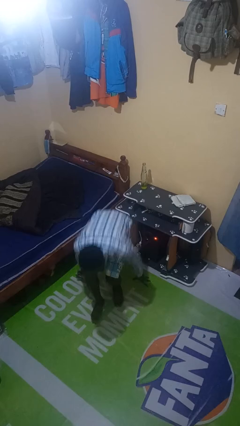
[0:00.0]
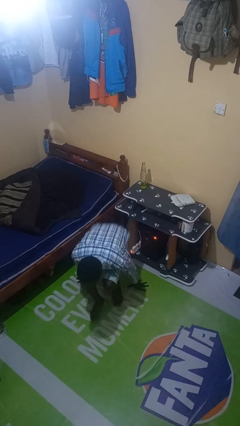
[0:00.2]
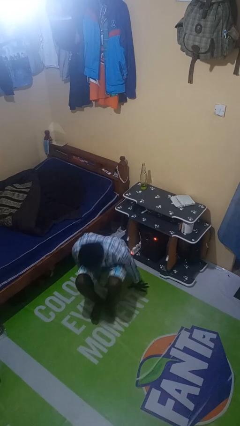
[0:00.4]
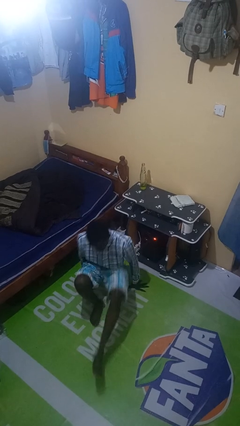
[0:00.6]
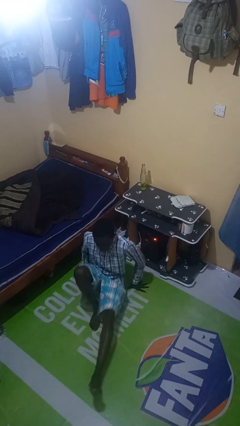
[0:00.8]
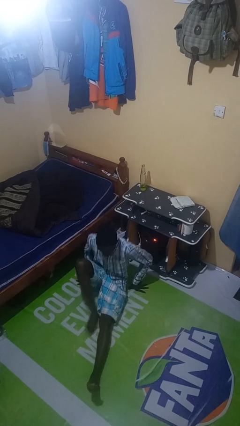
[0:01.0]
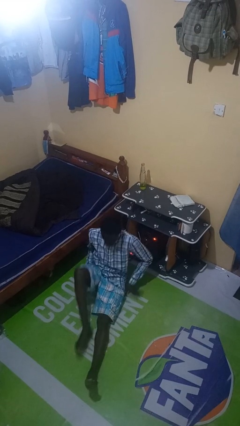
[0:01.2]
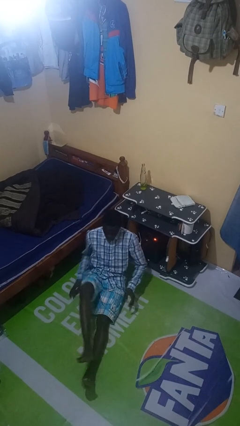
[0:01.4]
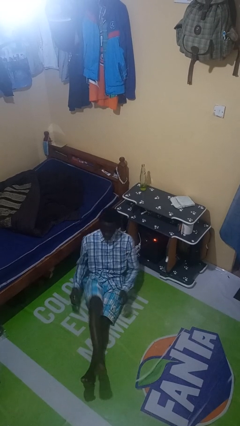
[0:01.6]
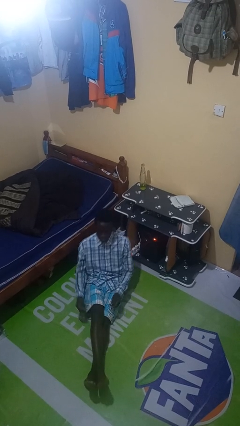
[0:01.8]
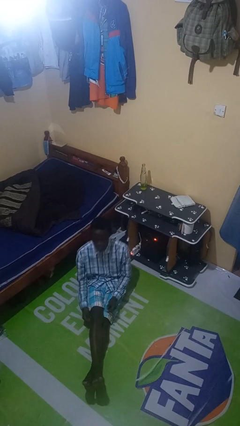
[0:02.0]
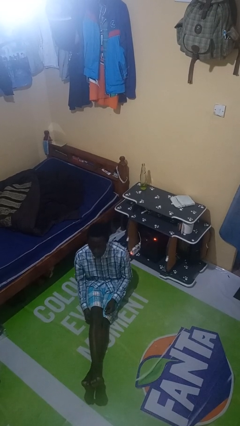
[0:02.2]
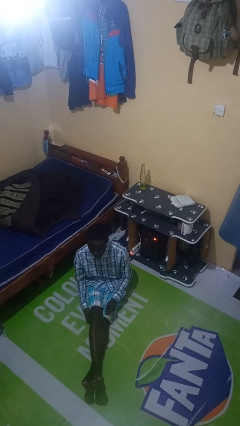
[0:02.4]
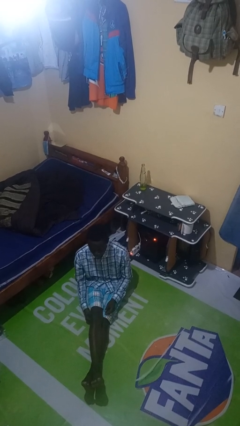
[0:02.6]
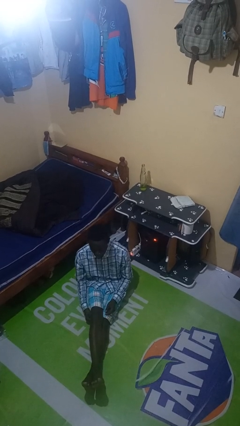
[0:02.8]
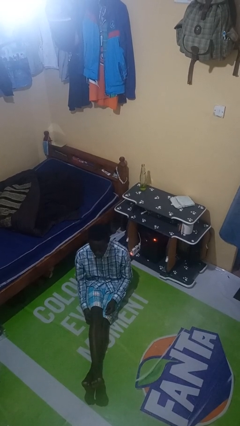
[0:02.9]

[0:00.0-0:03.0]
person sits crisscross

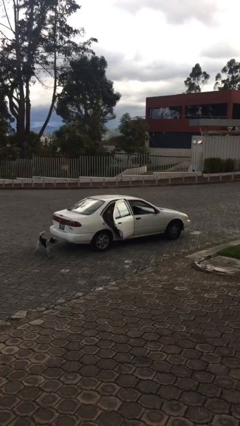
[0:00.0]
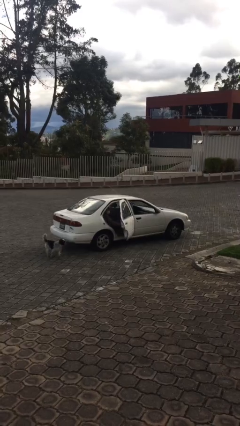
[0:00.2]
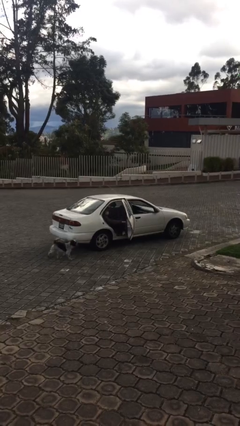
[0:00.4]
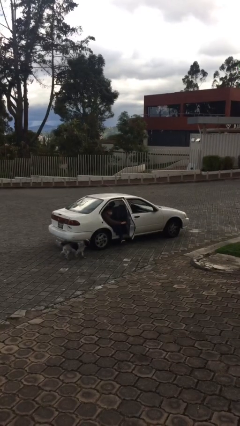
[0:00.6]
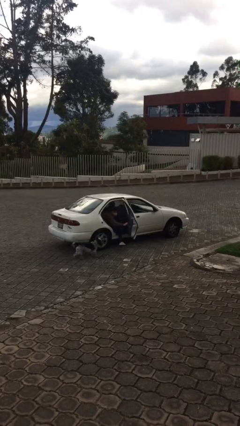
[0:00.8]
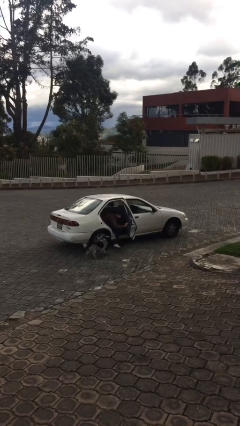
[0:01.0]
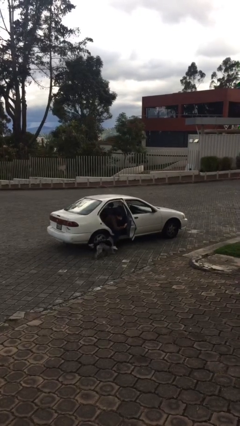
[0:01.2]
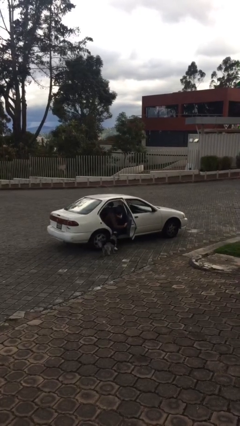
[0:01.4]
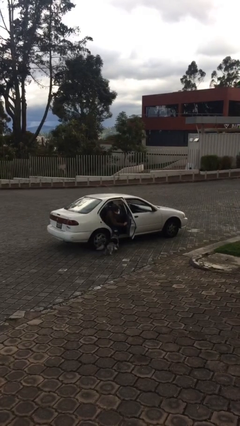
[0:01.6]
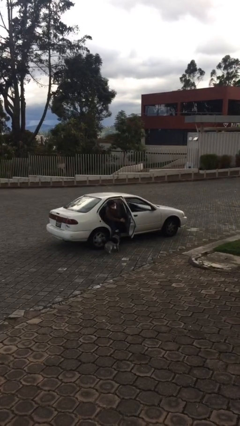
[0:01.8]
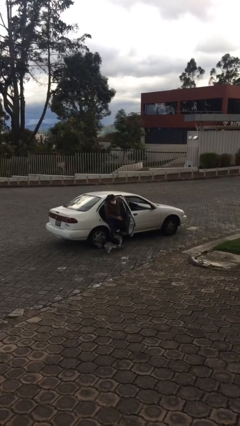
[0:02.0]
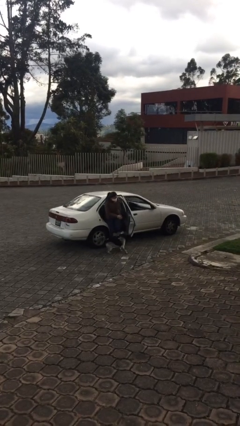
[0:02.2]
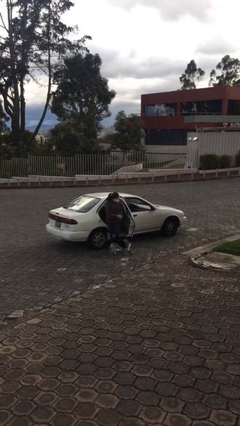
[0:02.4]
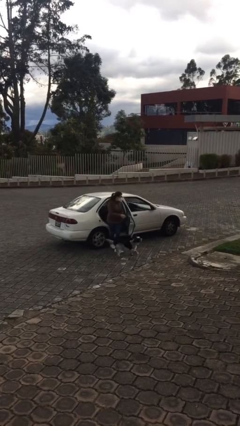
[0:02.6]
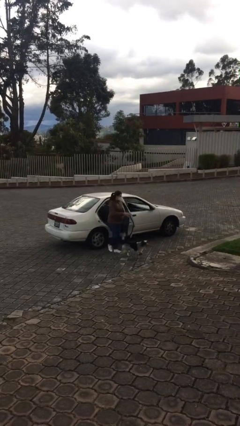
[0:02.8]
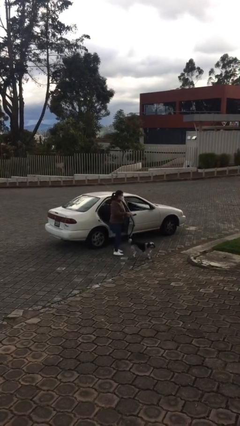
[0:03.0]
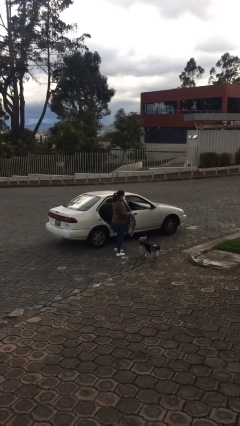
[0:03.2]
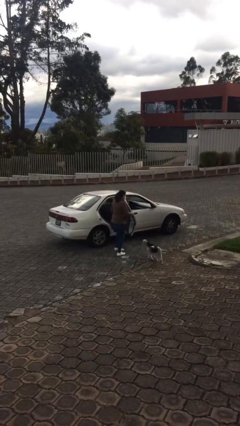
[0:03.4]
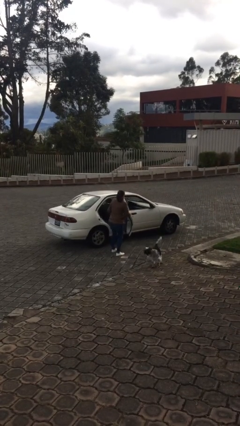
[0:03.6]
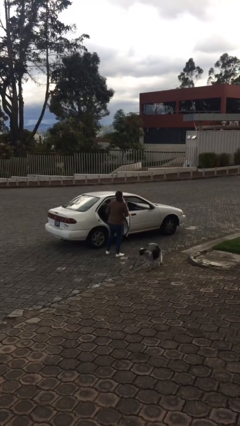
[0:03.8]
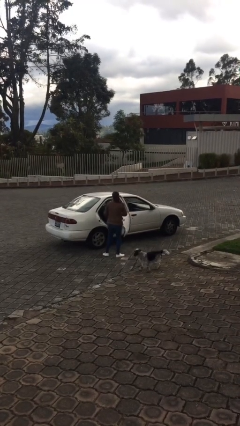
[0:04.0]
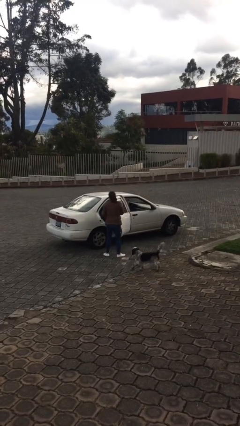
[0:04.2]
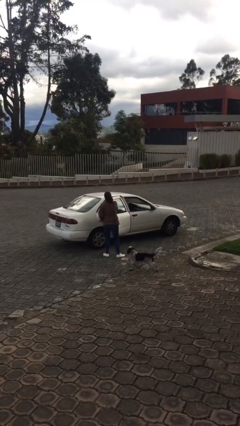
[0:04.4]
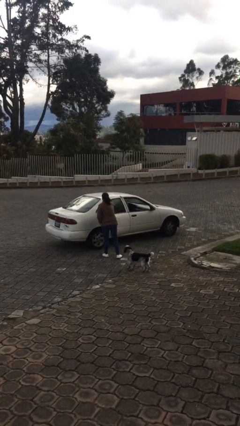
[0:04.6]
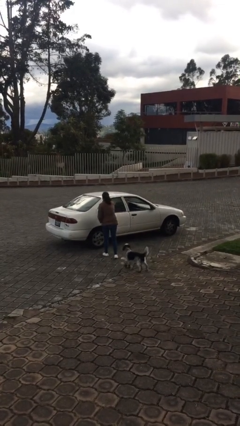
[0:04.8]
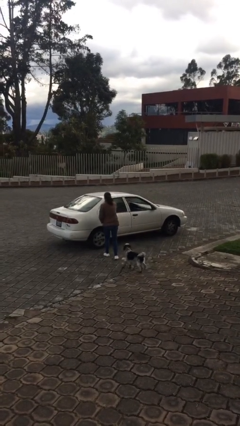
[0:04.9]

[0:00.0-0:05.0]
car drops off person

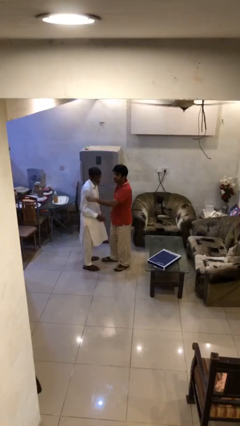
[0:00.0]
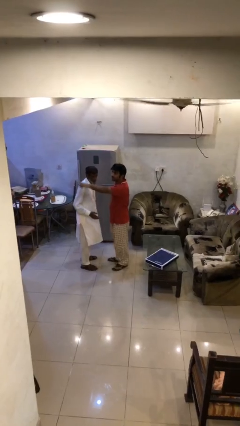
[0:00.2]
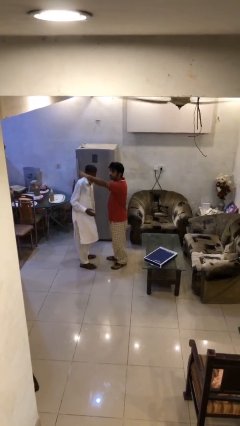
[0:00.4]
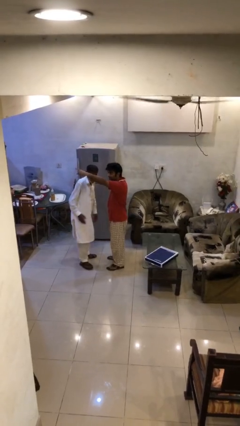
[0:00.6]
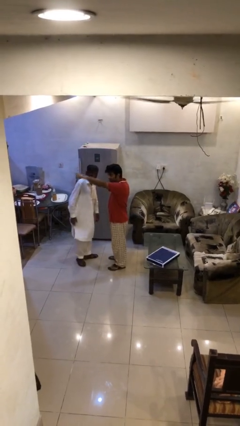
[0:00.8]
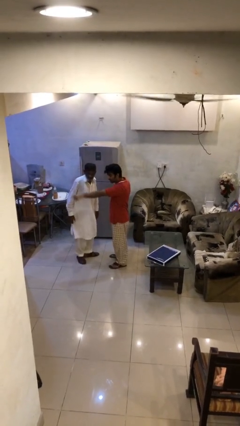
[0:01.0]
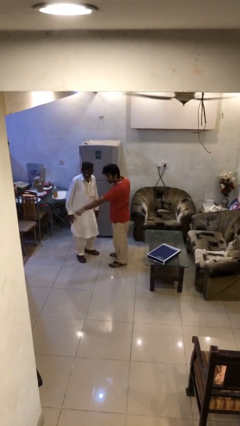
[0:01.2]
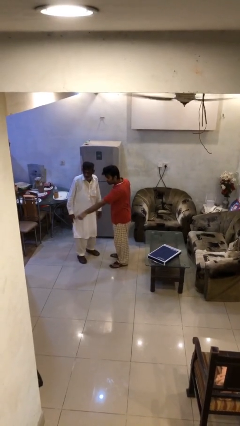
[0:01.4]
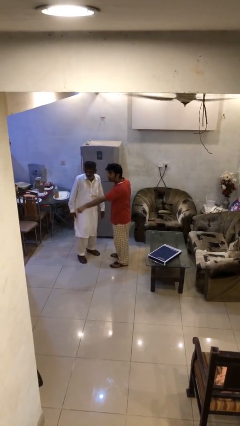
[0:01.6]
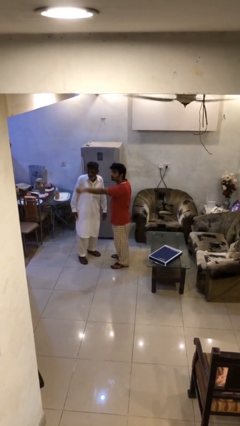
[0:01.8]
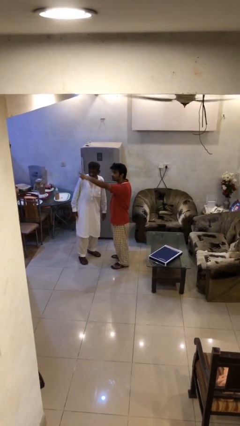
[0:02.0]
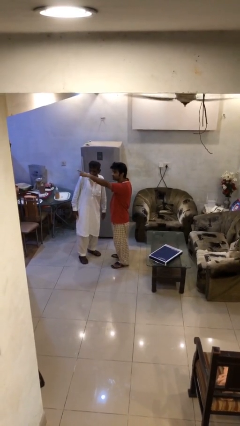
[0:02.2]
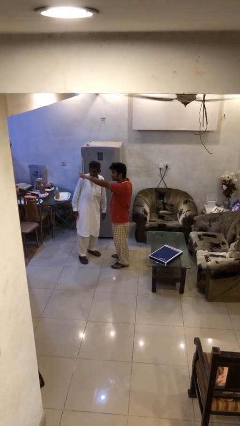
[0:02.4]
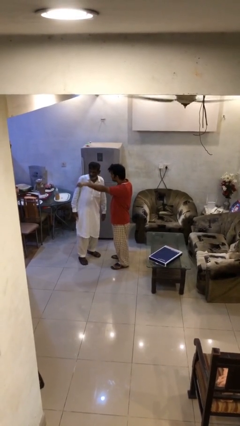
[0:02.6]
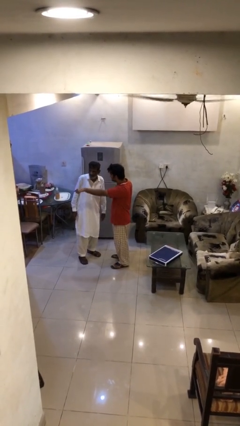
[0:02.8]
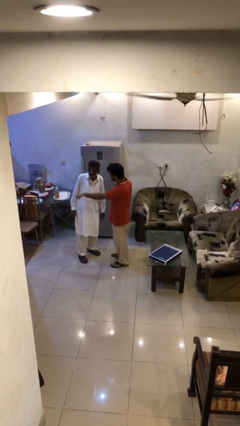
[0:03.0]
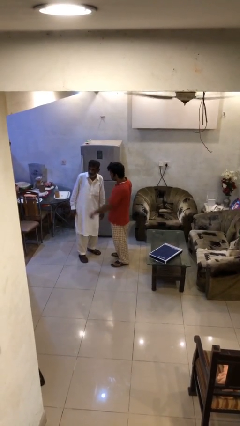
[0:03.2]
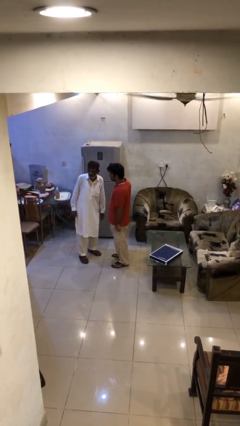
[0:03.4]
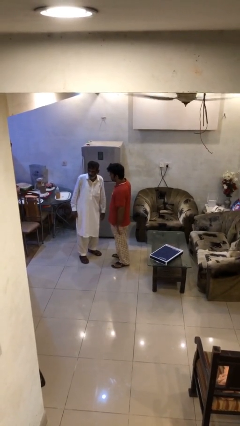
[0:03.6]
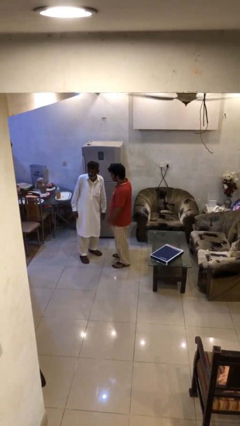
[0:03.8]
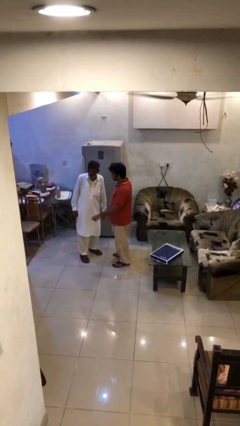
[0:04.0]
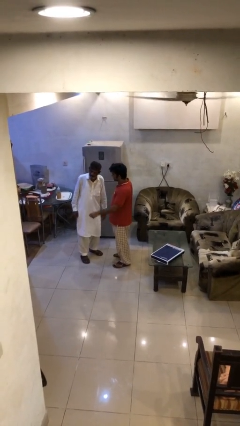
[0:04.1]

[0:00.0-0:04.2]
person talks to person

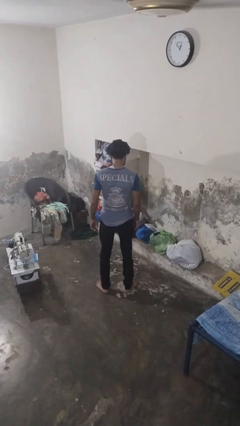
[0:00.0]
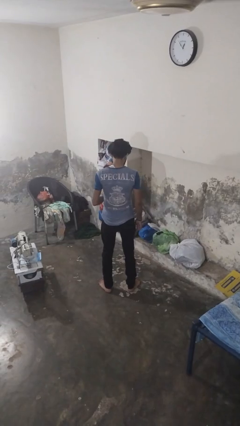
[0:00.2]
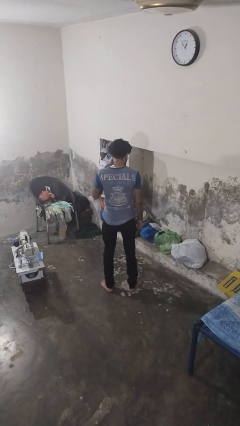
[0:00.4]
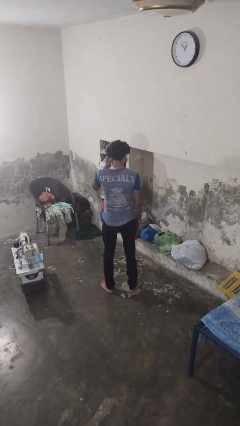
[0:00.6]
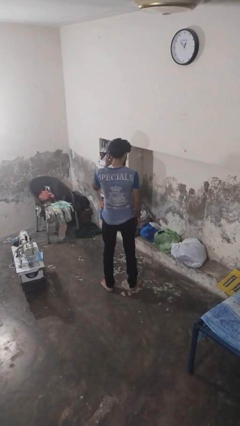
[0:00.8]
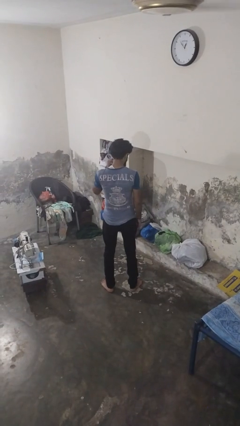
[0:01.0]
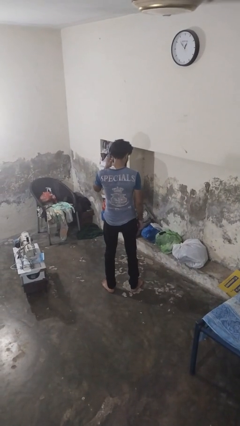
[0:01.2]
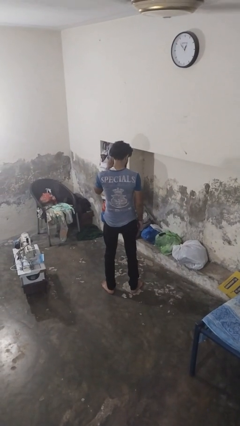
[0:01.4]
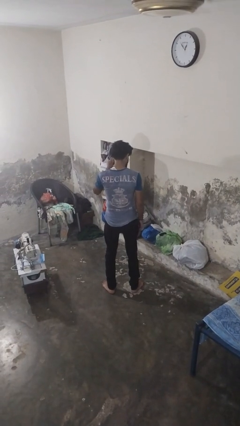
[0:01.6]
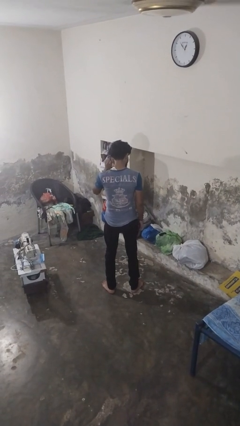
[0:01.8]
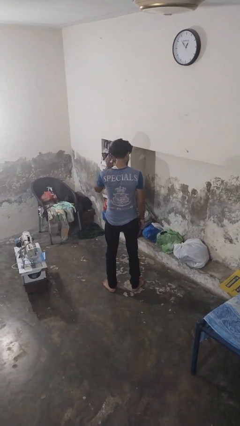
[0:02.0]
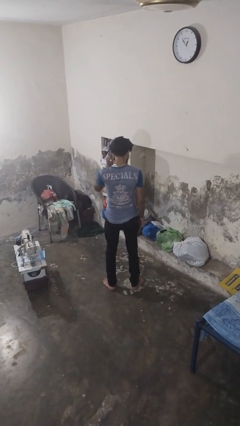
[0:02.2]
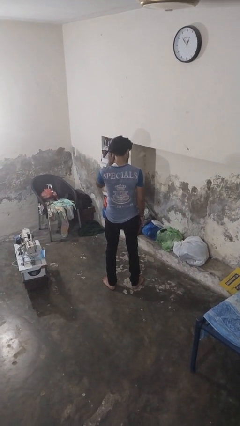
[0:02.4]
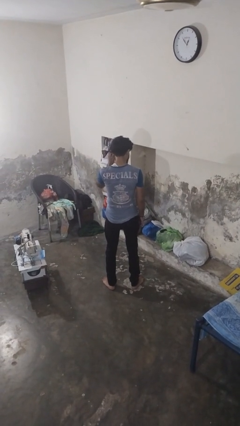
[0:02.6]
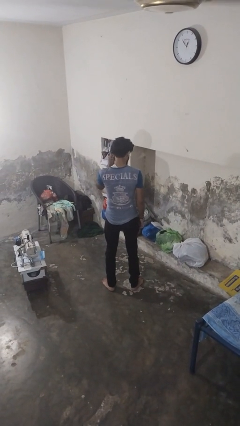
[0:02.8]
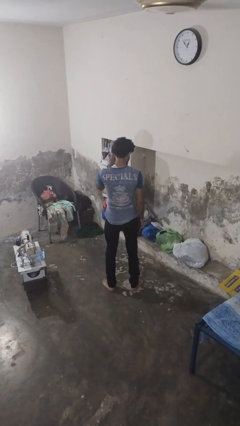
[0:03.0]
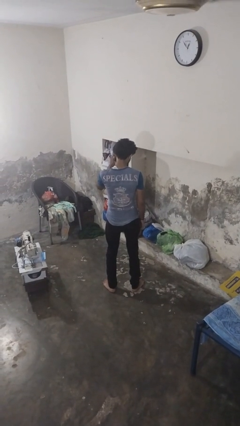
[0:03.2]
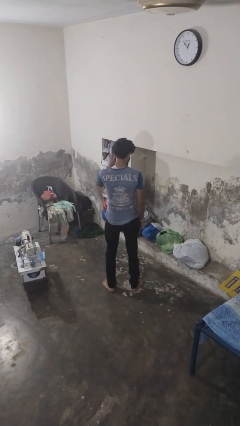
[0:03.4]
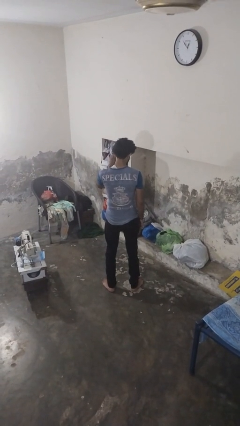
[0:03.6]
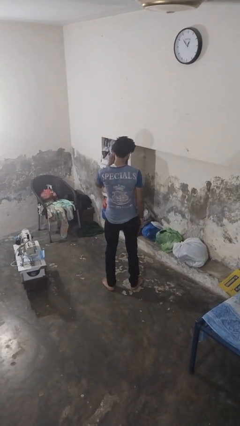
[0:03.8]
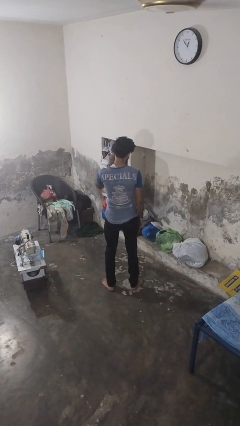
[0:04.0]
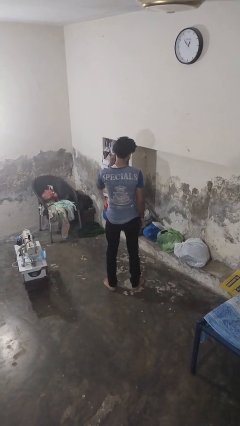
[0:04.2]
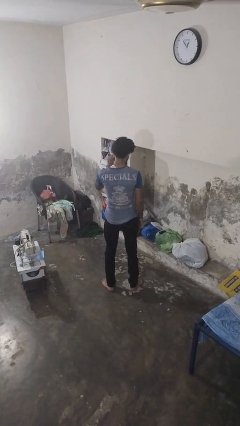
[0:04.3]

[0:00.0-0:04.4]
person touches earlobe

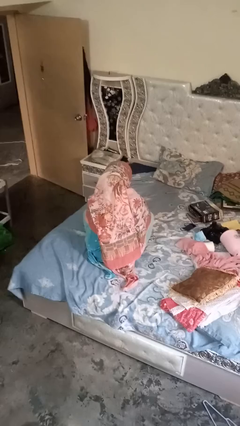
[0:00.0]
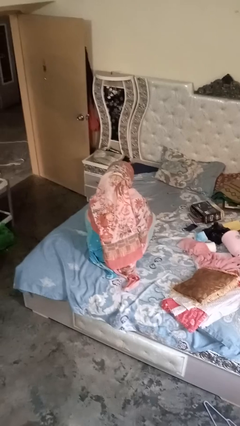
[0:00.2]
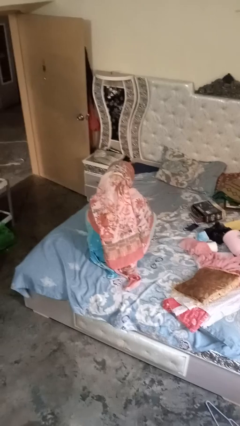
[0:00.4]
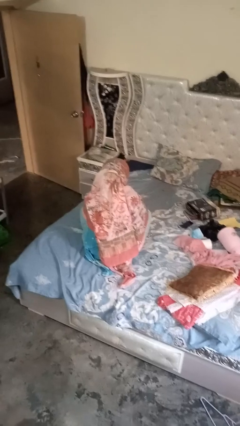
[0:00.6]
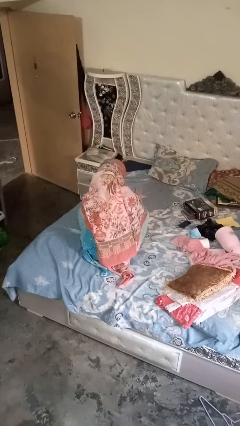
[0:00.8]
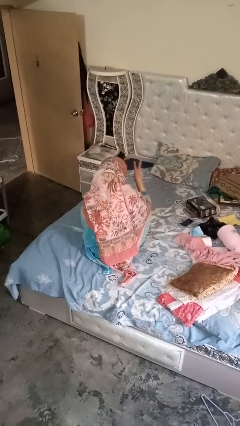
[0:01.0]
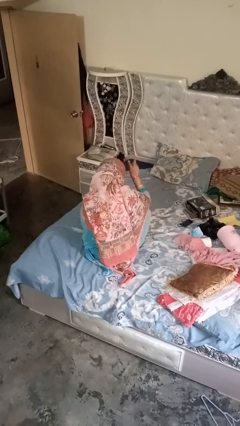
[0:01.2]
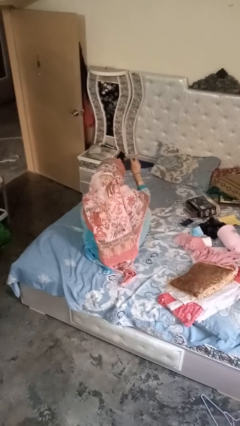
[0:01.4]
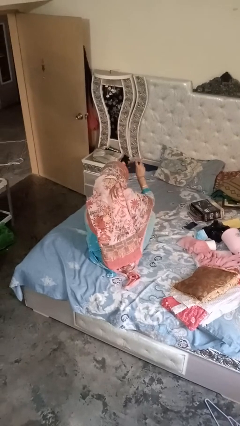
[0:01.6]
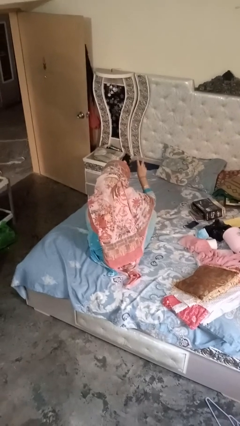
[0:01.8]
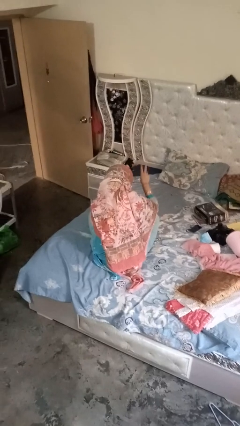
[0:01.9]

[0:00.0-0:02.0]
person gestures be quiet
